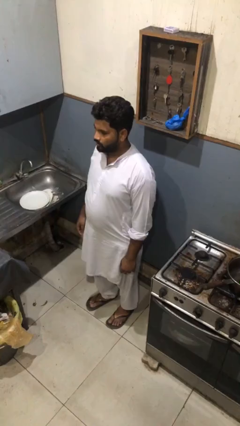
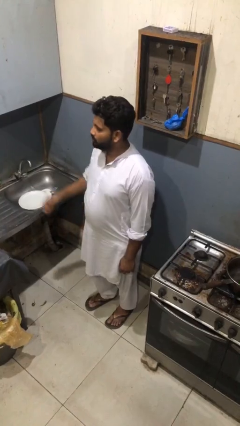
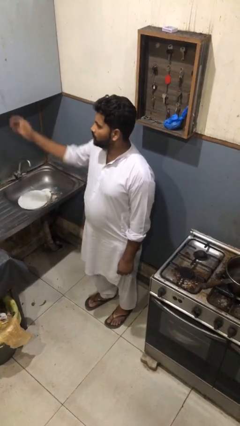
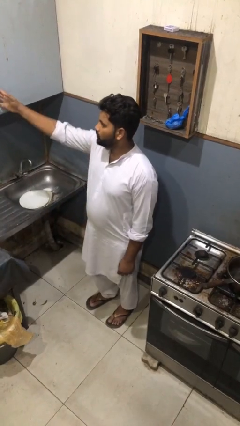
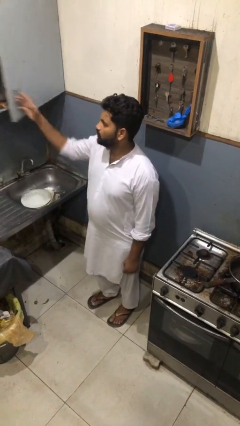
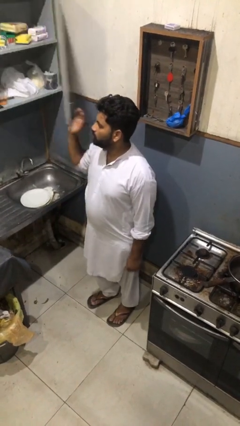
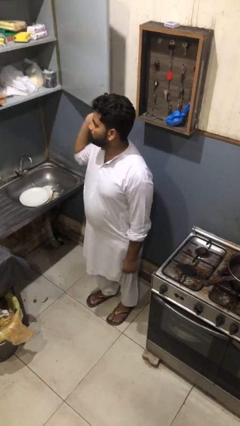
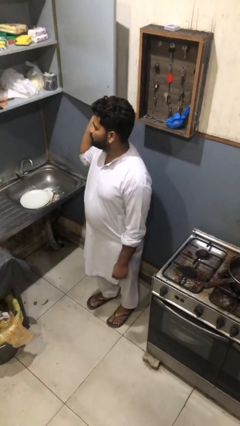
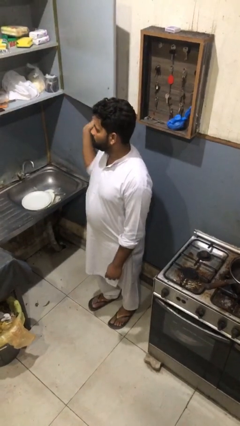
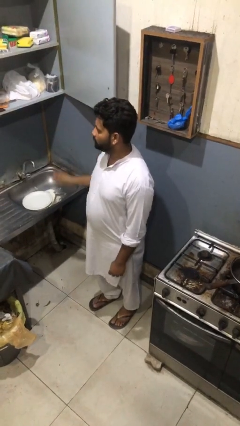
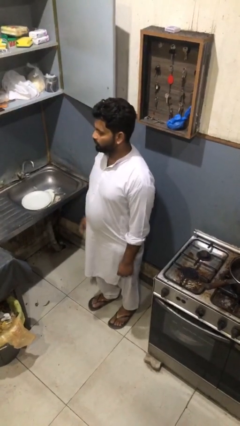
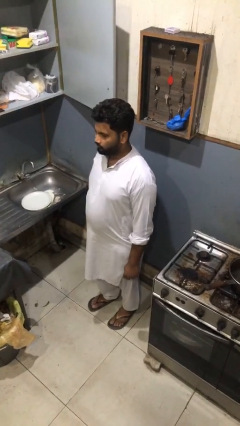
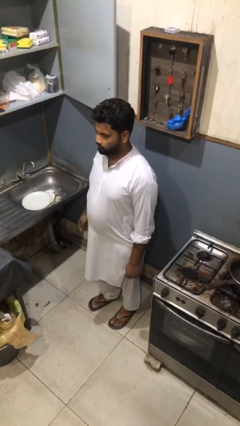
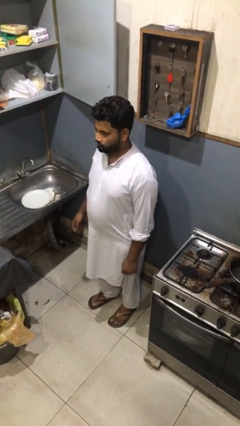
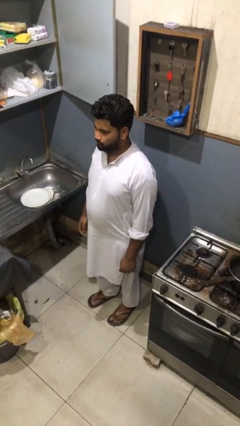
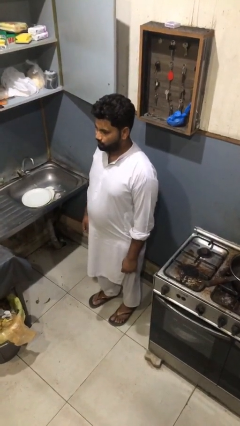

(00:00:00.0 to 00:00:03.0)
person opens cabinet

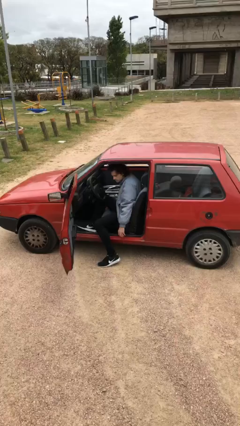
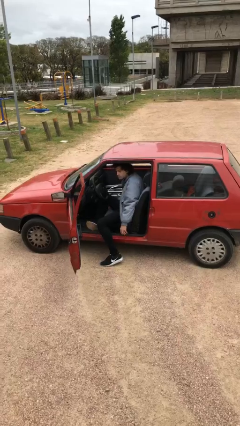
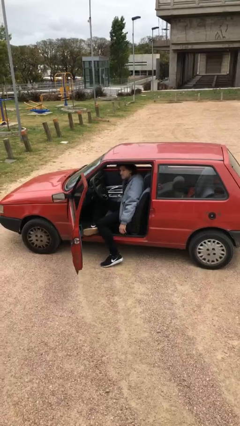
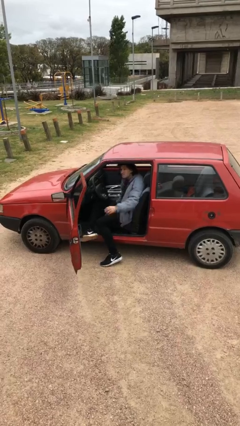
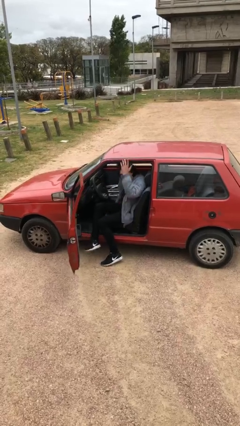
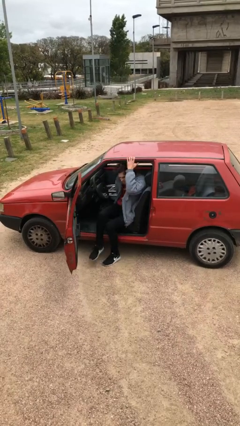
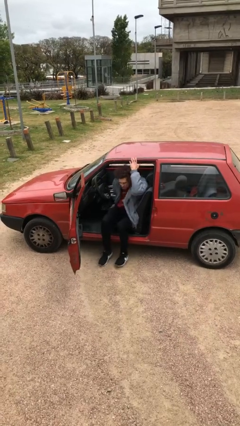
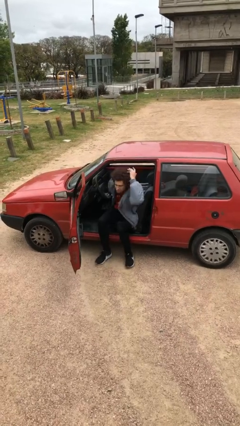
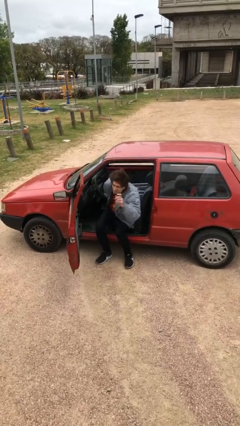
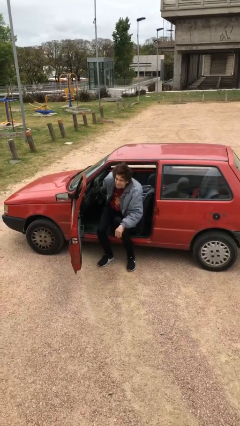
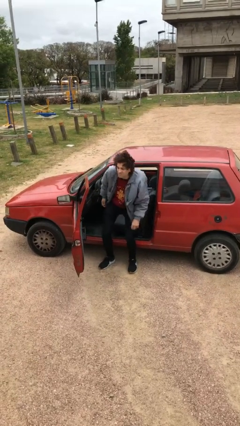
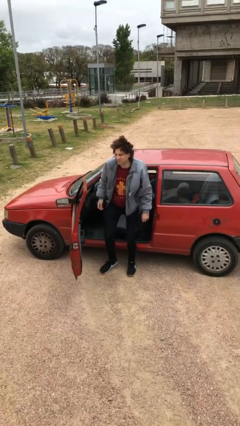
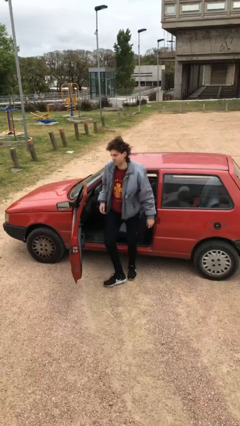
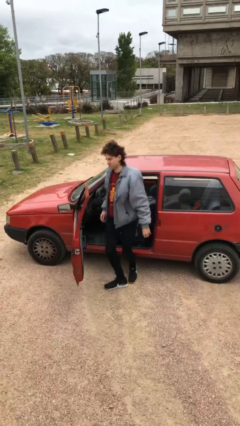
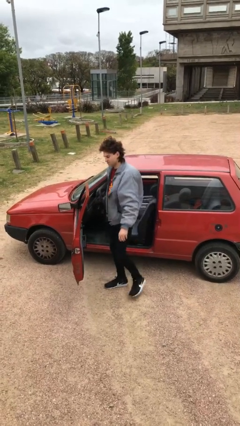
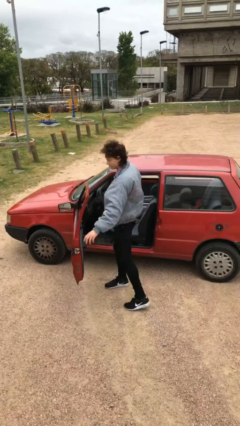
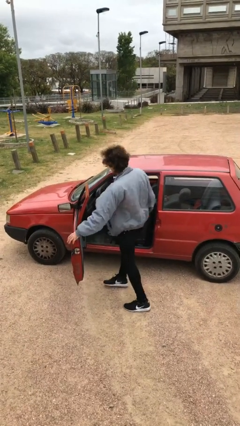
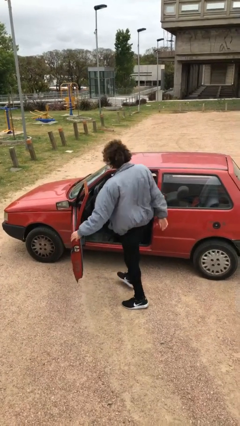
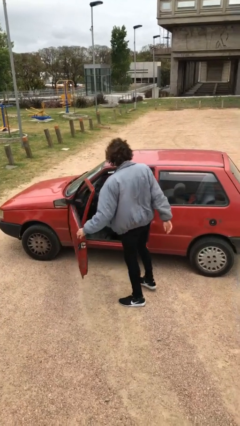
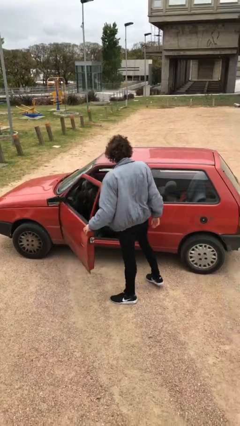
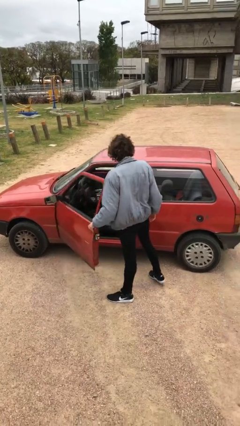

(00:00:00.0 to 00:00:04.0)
person exits car

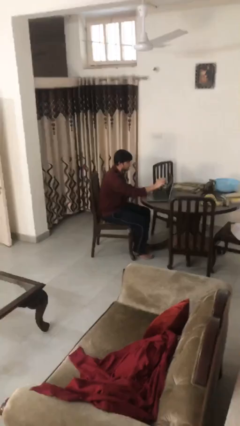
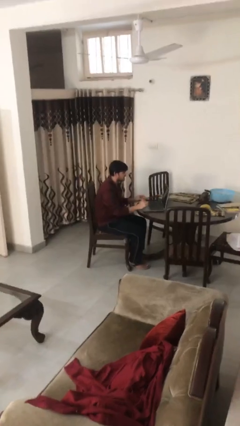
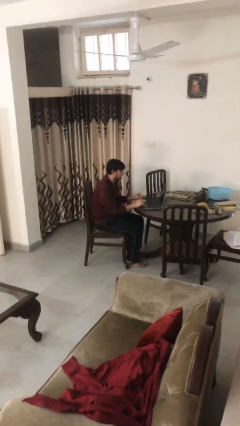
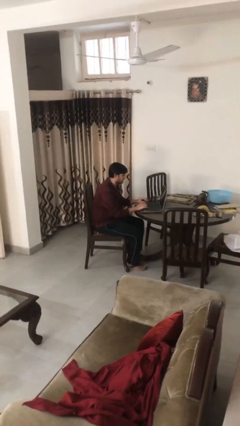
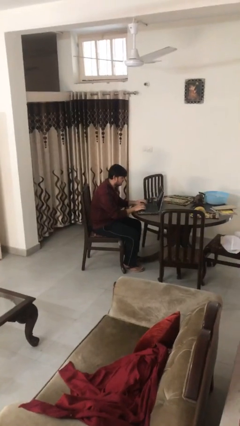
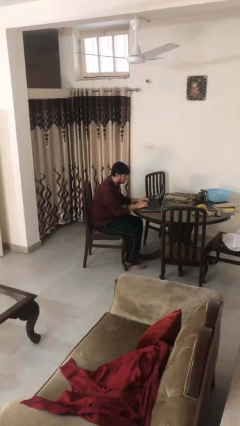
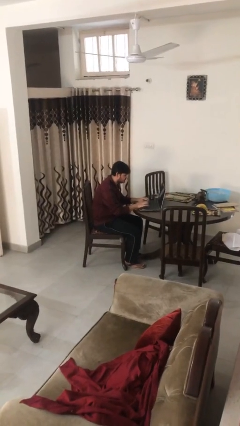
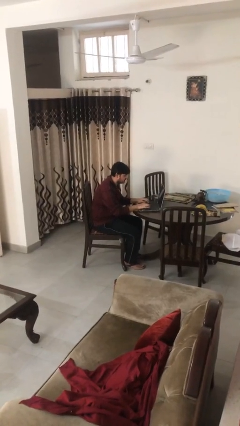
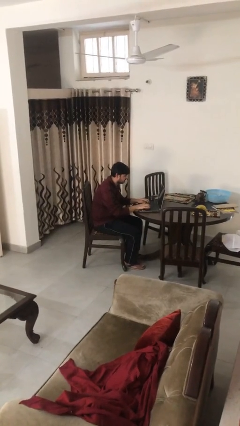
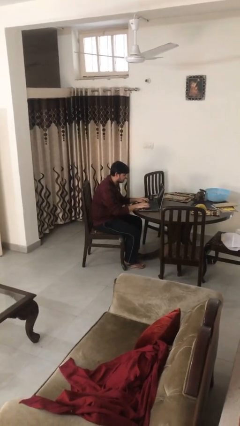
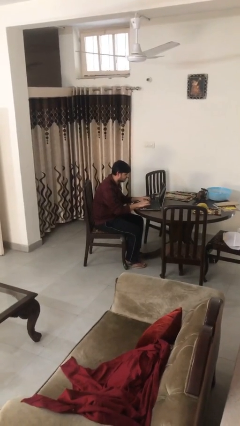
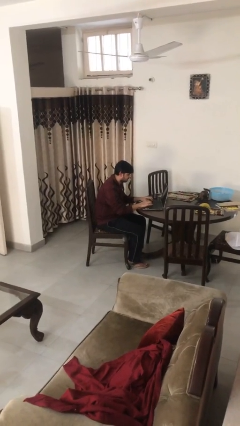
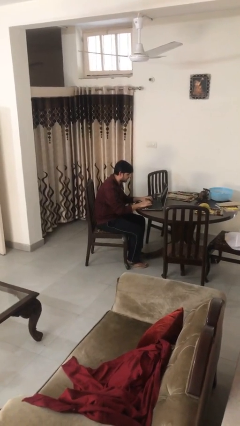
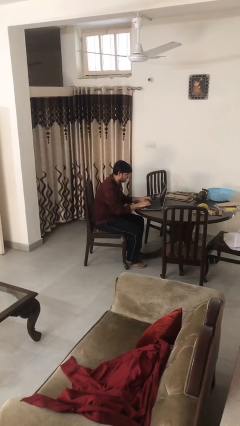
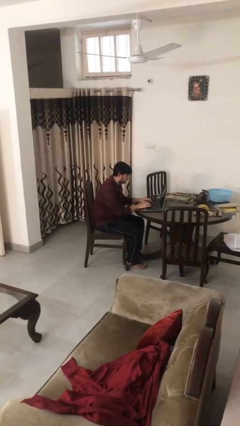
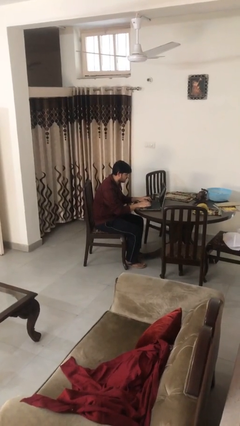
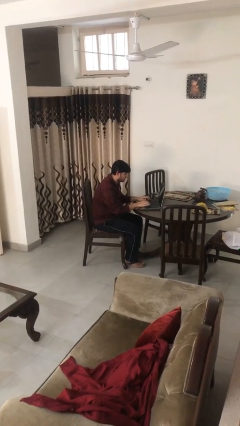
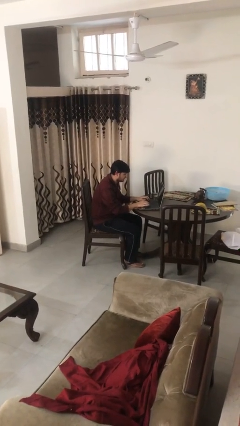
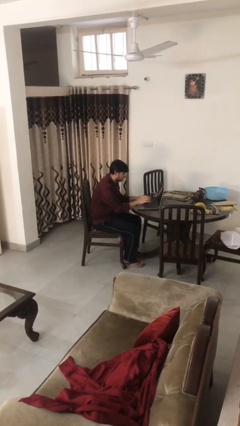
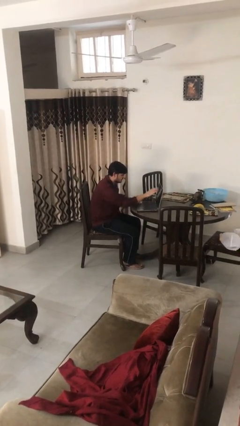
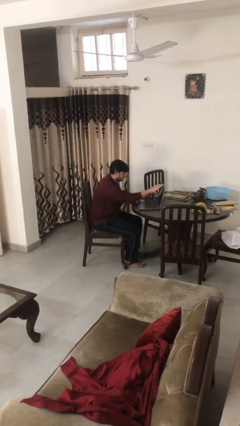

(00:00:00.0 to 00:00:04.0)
person interacts with laptop

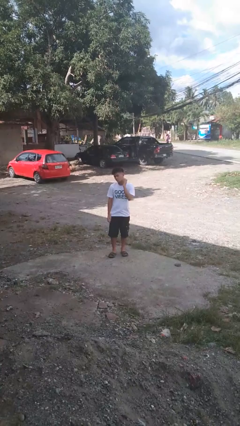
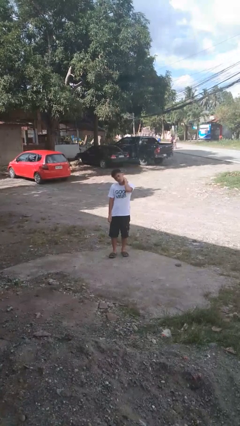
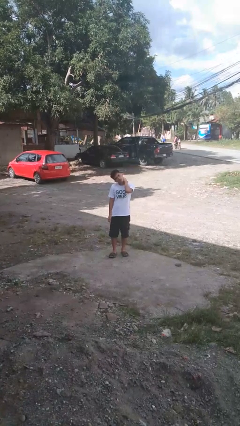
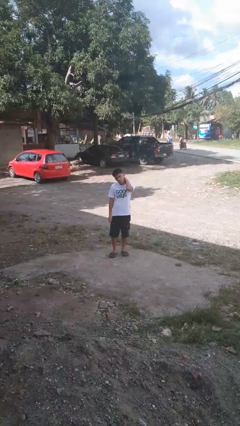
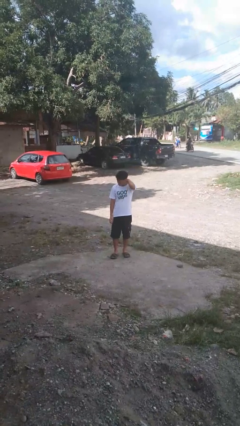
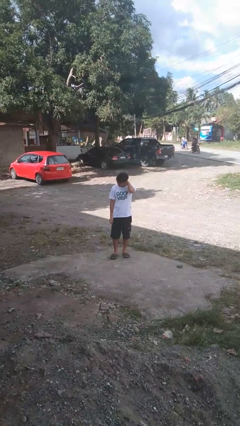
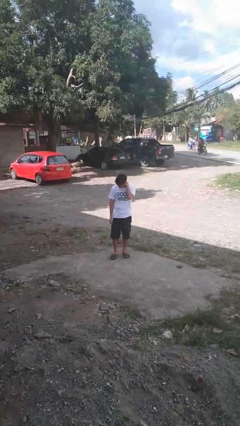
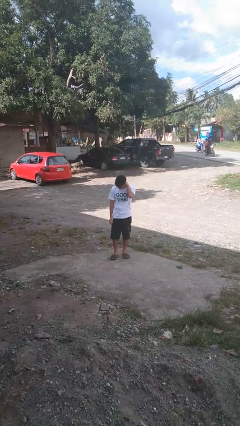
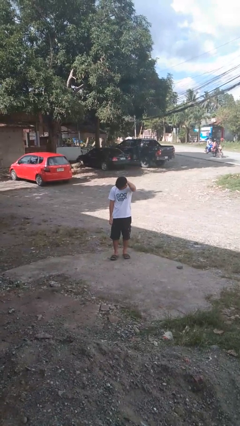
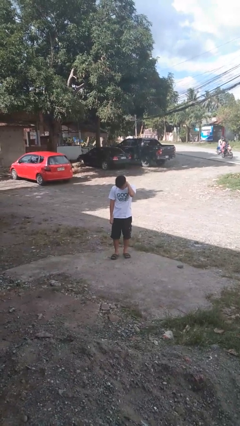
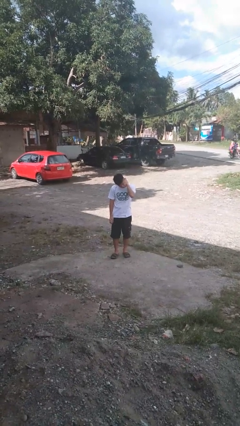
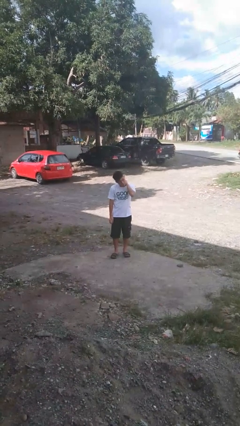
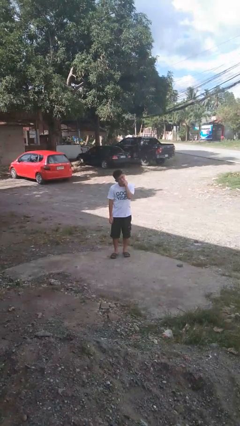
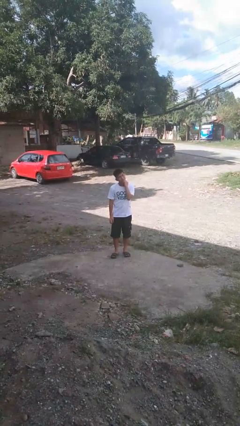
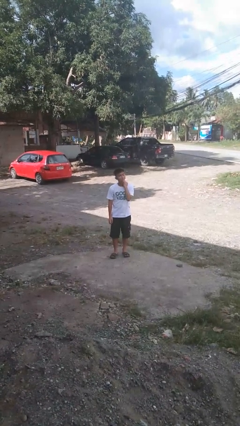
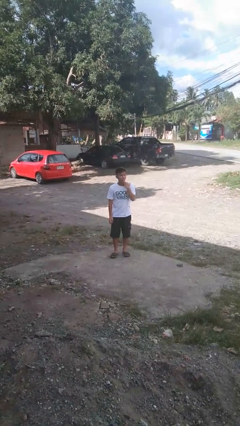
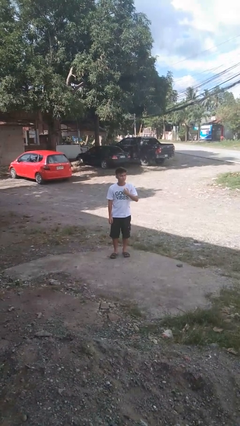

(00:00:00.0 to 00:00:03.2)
person rubs neck

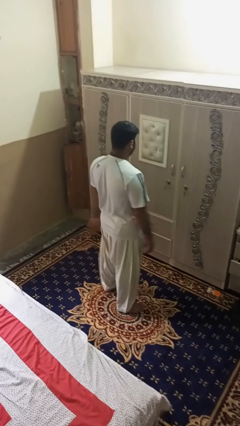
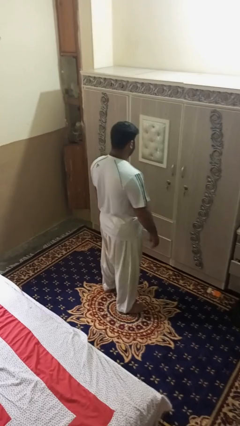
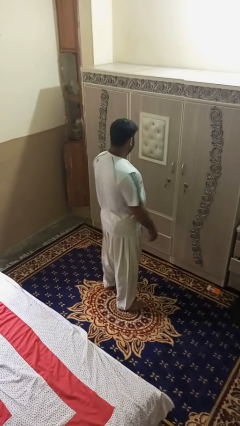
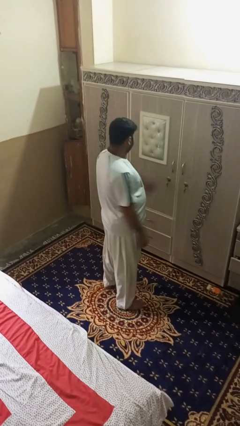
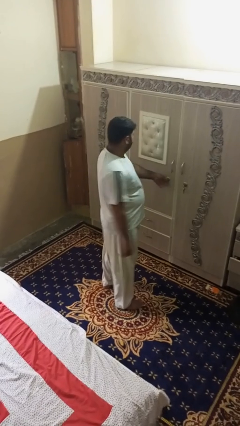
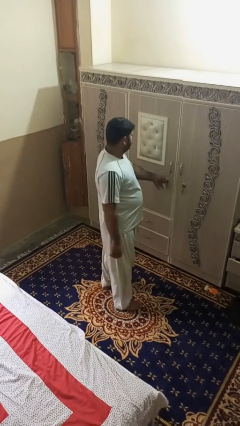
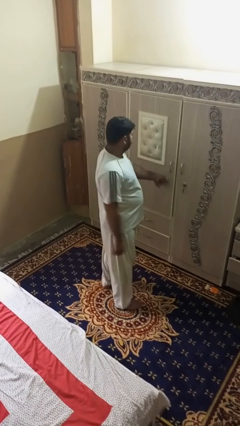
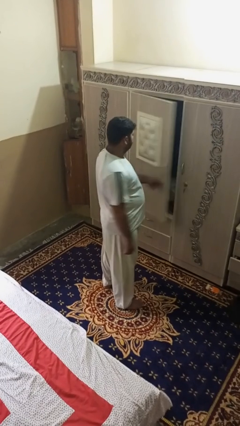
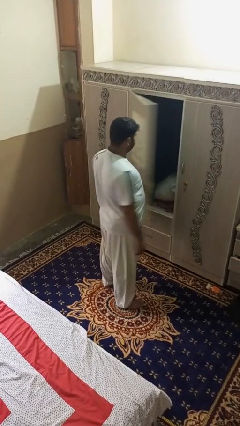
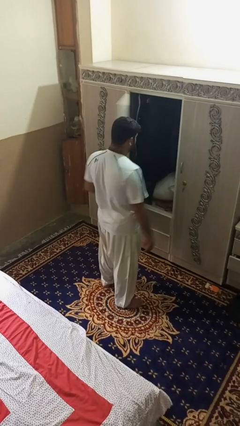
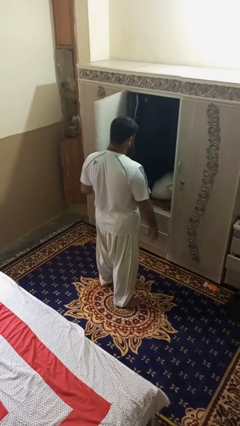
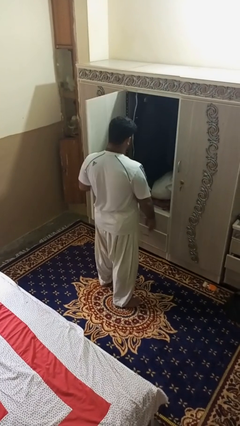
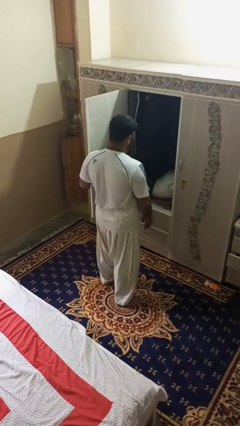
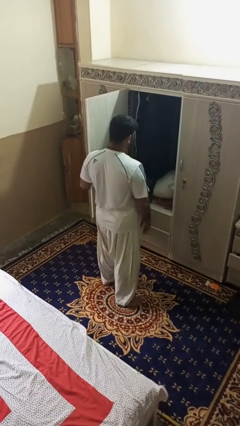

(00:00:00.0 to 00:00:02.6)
person opens dresser drawer

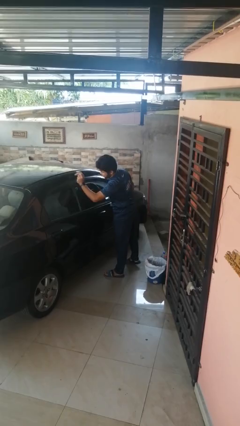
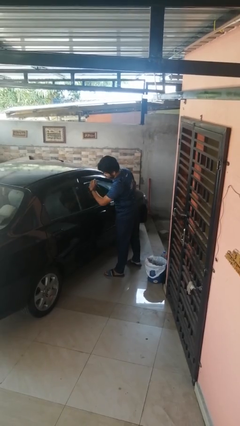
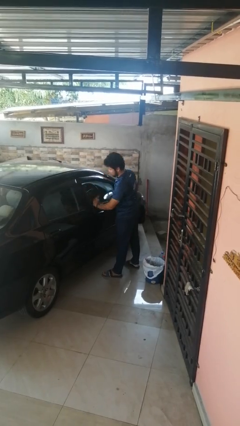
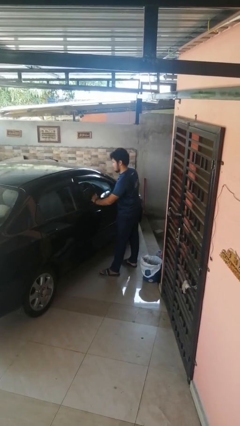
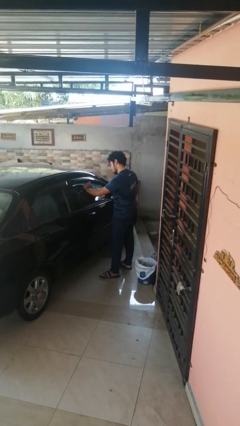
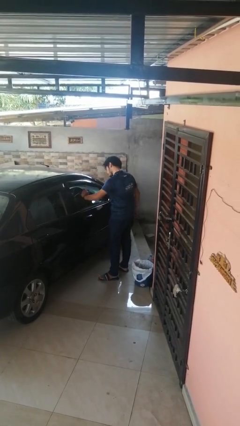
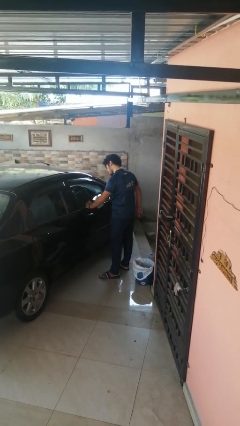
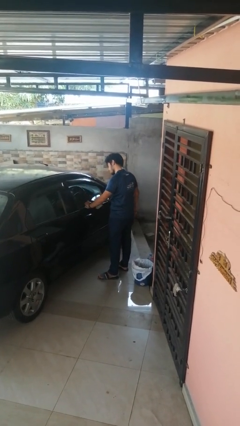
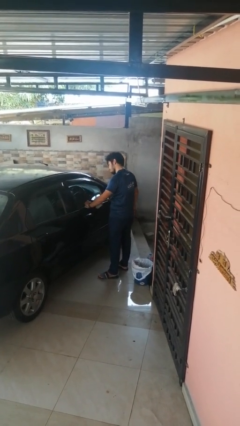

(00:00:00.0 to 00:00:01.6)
person polishes car with rag
